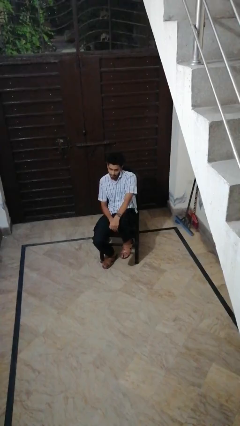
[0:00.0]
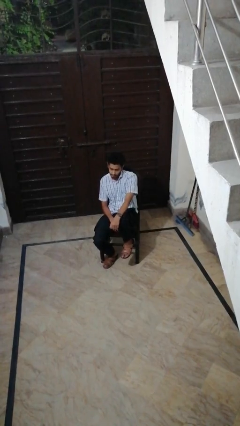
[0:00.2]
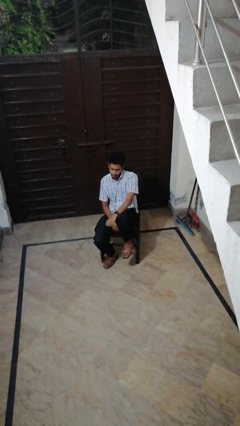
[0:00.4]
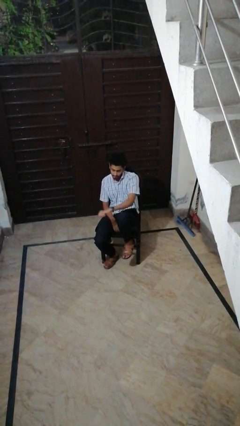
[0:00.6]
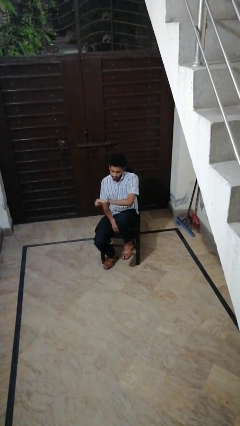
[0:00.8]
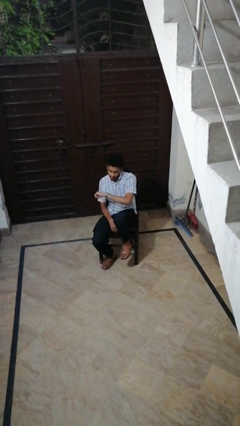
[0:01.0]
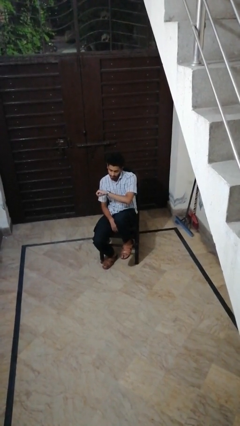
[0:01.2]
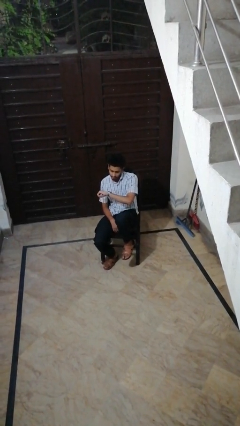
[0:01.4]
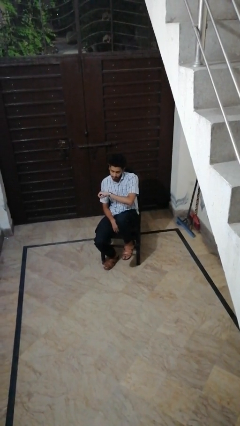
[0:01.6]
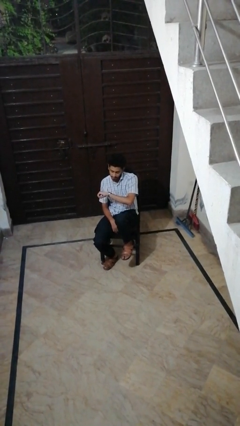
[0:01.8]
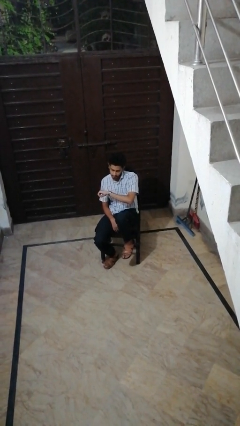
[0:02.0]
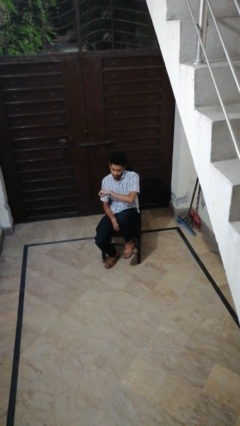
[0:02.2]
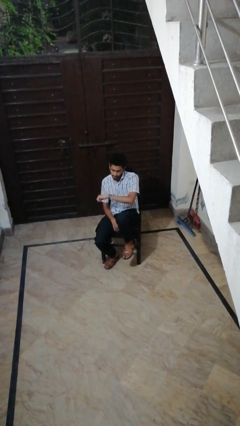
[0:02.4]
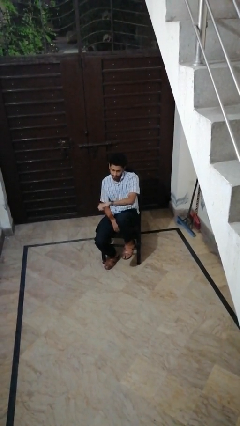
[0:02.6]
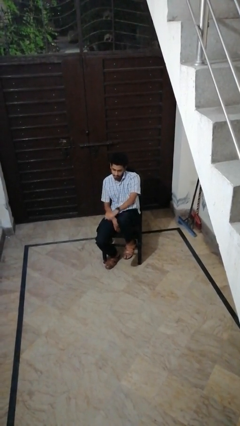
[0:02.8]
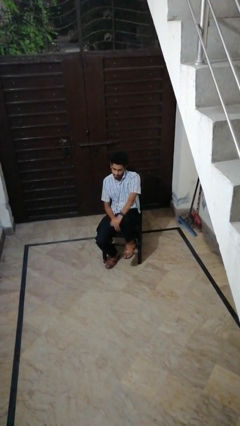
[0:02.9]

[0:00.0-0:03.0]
person looks at wristwatch

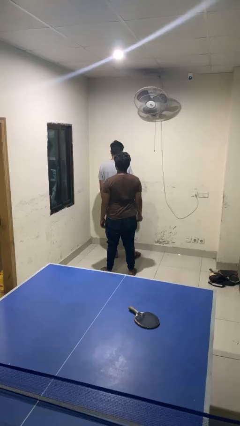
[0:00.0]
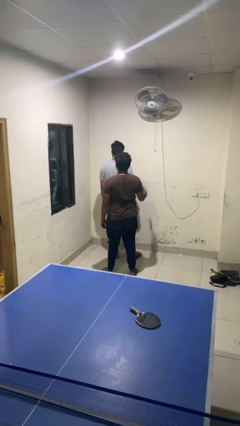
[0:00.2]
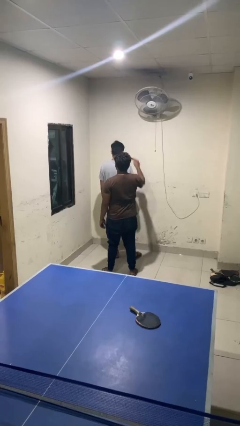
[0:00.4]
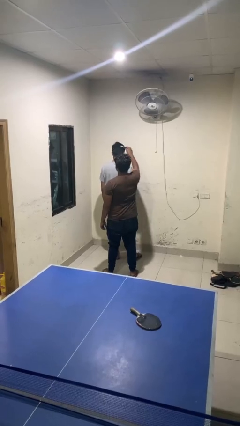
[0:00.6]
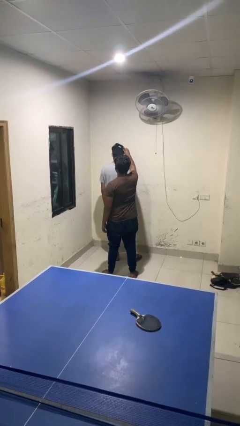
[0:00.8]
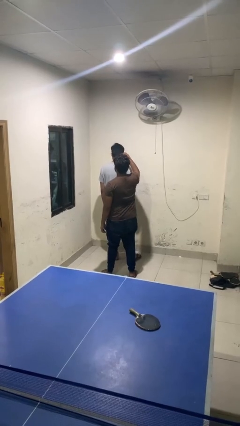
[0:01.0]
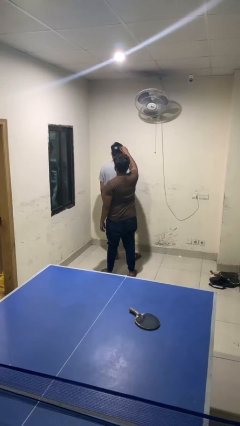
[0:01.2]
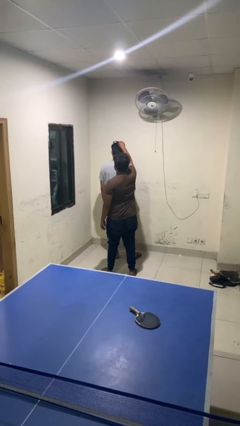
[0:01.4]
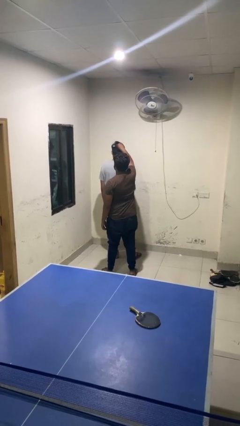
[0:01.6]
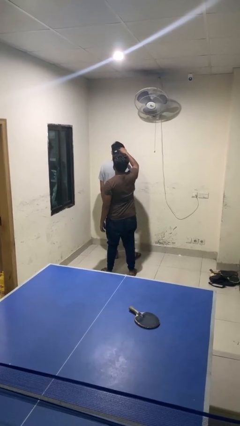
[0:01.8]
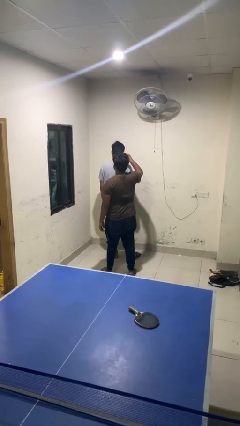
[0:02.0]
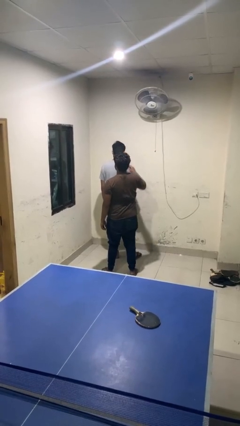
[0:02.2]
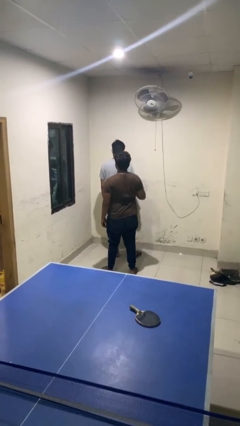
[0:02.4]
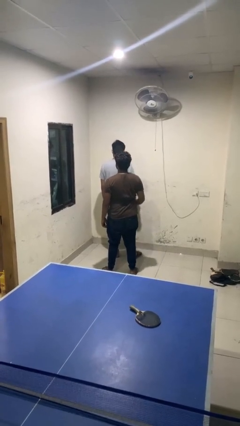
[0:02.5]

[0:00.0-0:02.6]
person brushes hair of person

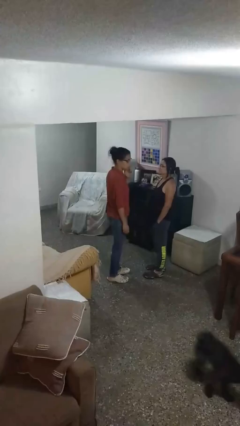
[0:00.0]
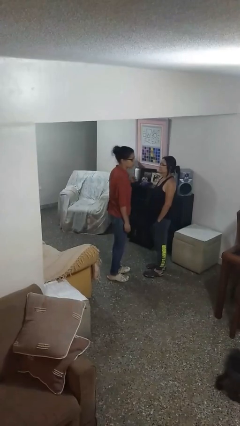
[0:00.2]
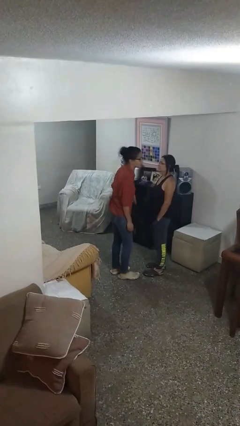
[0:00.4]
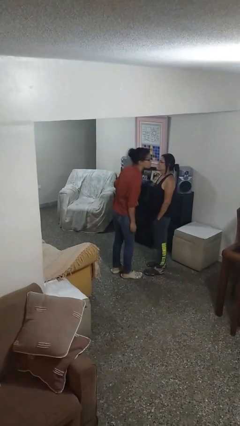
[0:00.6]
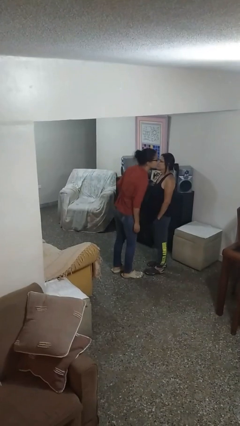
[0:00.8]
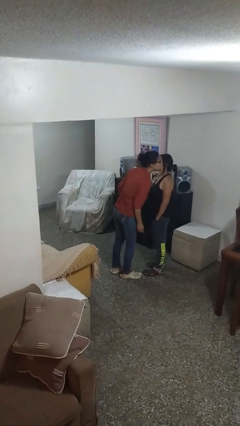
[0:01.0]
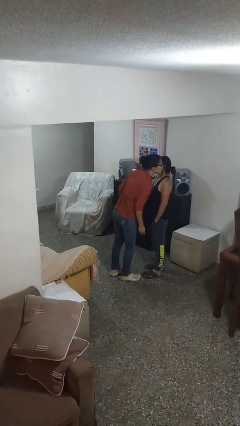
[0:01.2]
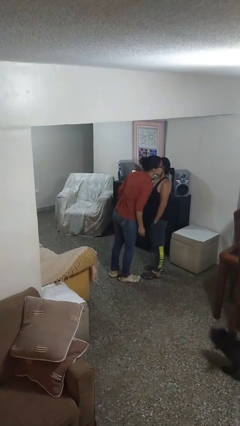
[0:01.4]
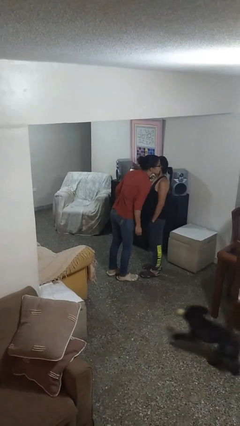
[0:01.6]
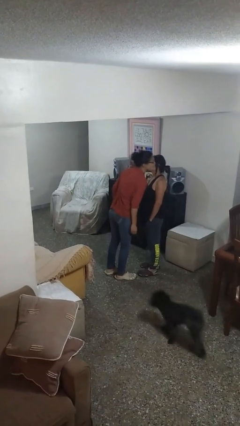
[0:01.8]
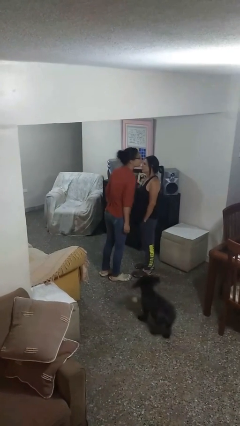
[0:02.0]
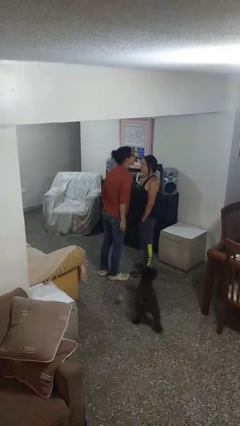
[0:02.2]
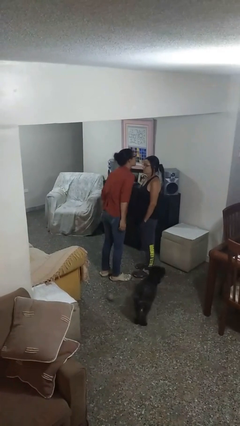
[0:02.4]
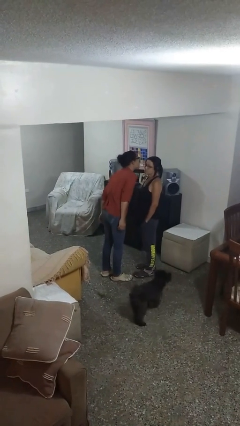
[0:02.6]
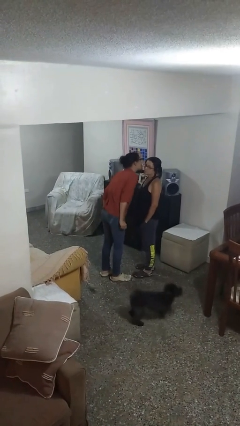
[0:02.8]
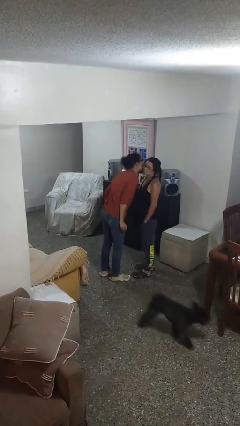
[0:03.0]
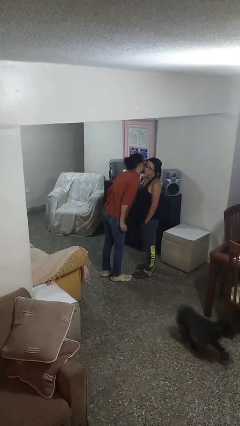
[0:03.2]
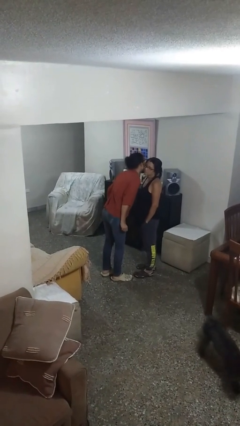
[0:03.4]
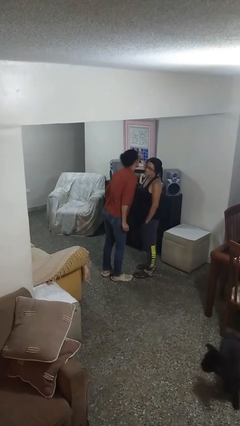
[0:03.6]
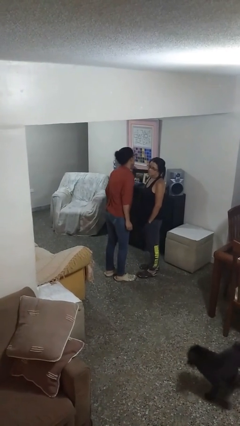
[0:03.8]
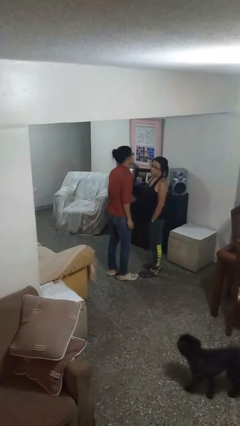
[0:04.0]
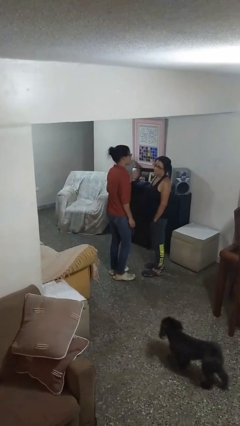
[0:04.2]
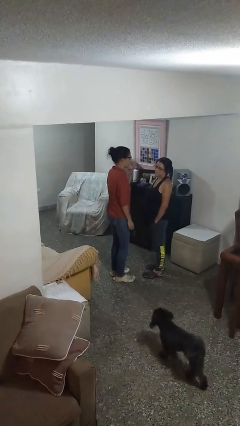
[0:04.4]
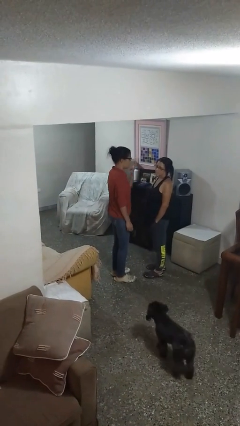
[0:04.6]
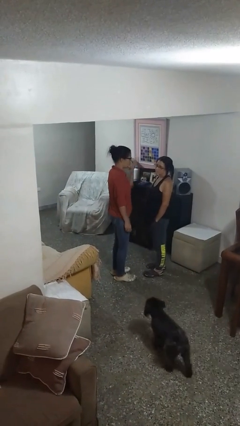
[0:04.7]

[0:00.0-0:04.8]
person kisses cheek of person

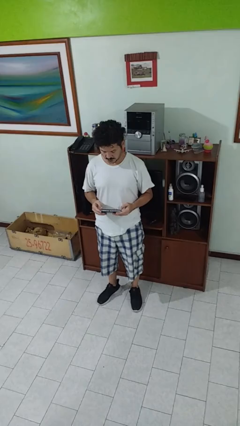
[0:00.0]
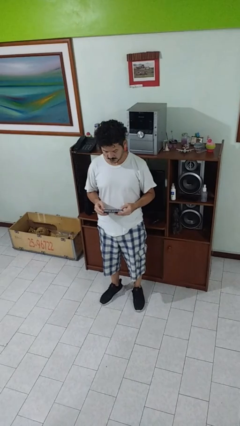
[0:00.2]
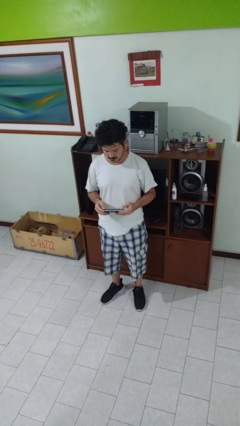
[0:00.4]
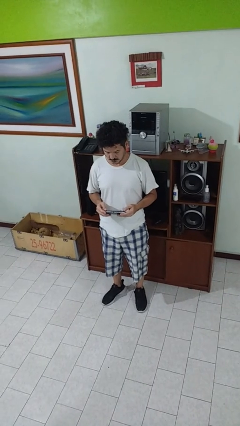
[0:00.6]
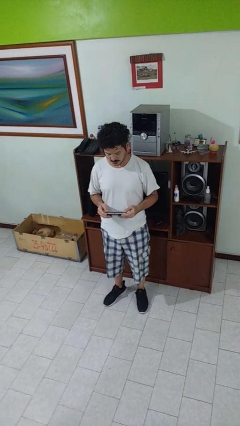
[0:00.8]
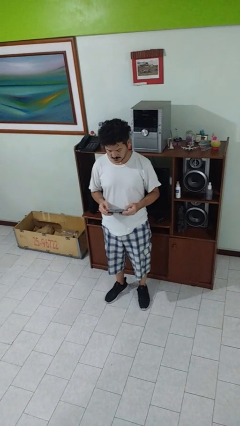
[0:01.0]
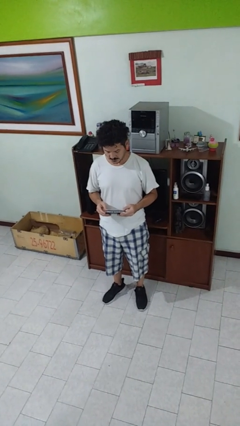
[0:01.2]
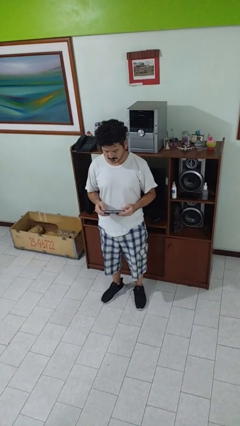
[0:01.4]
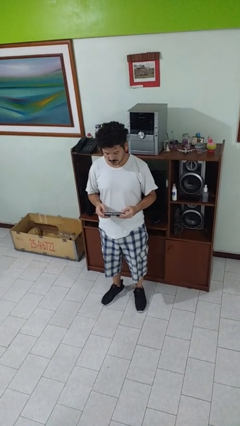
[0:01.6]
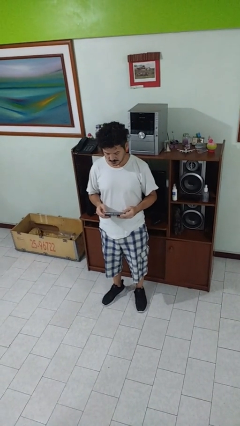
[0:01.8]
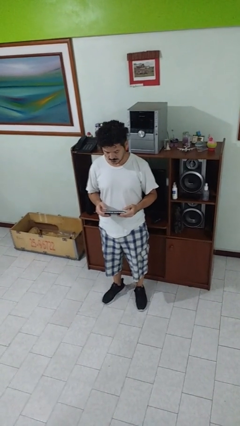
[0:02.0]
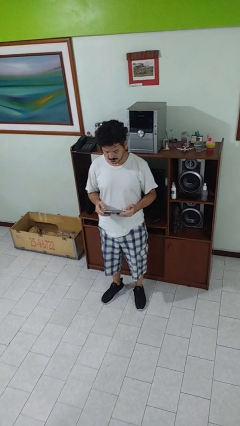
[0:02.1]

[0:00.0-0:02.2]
person interacts with handheld game

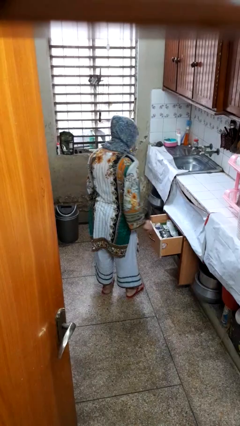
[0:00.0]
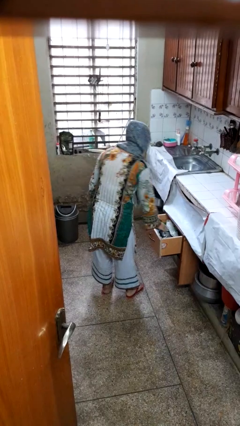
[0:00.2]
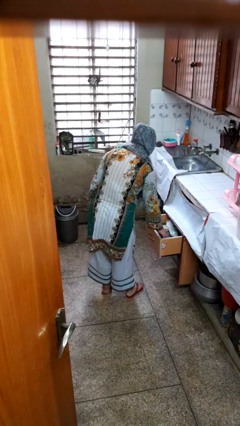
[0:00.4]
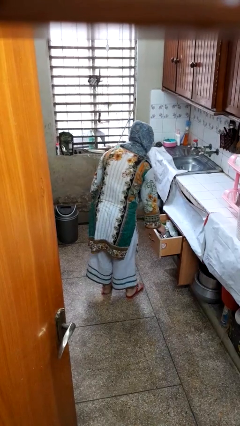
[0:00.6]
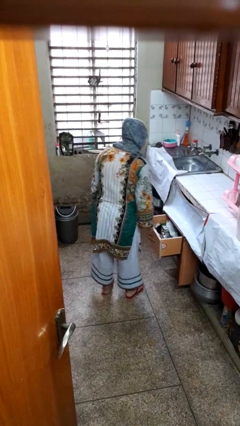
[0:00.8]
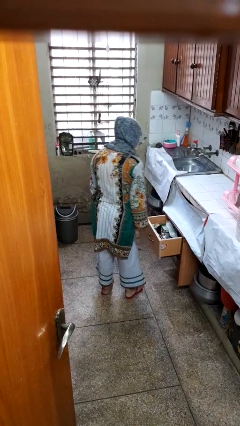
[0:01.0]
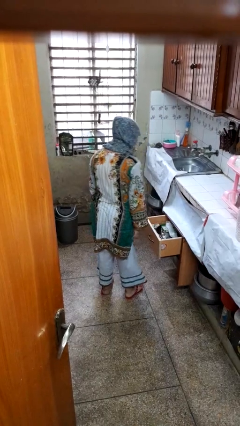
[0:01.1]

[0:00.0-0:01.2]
person puts object into kitchen drawer

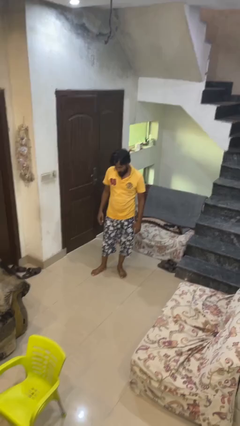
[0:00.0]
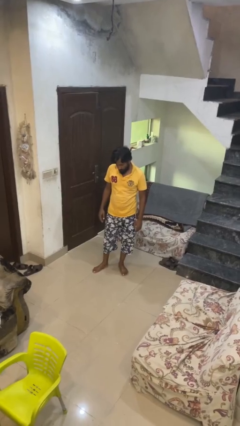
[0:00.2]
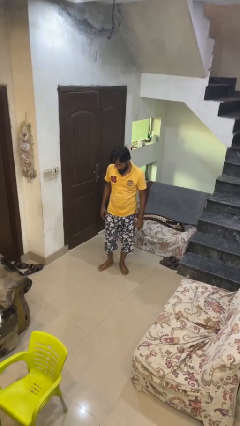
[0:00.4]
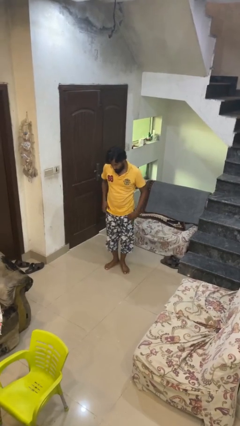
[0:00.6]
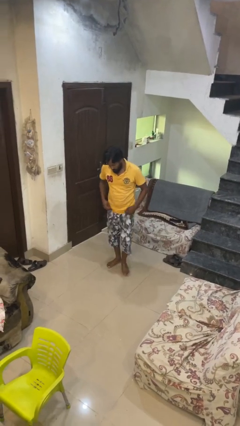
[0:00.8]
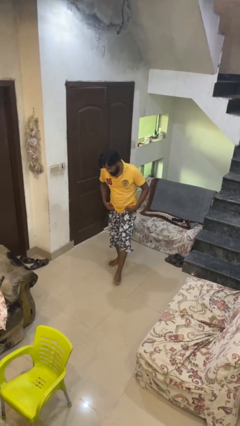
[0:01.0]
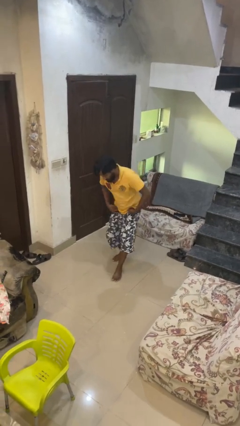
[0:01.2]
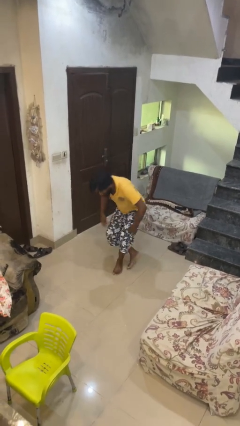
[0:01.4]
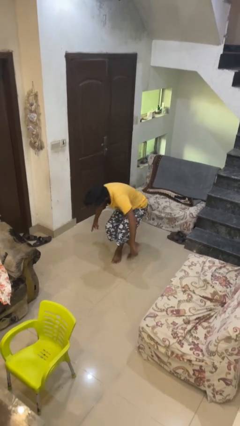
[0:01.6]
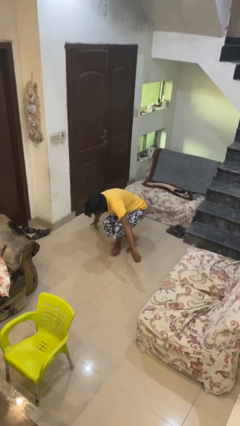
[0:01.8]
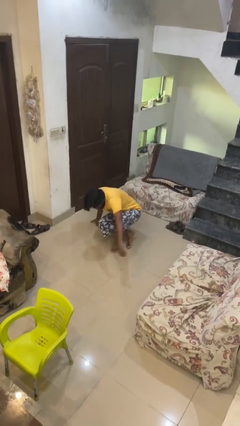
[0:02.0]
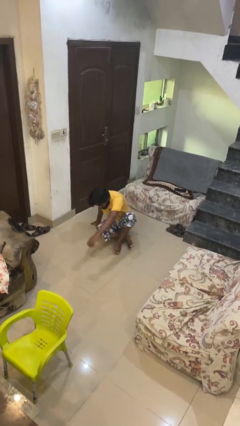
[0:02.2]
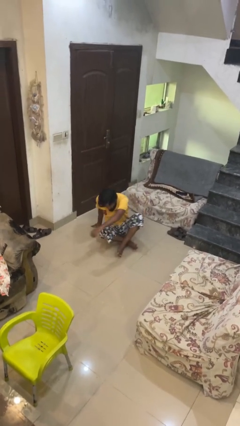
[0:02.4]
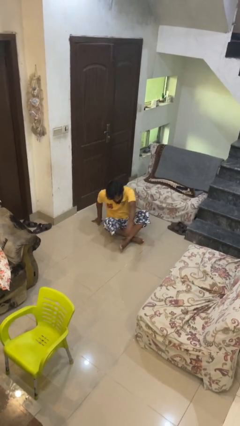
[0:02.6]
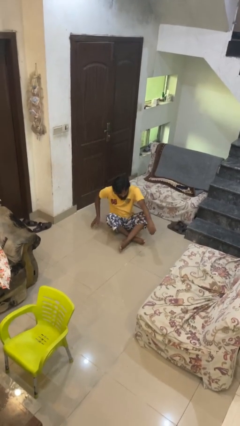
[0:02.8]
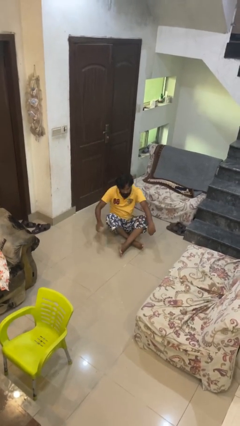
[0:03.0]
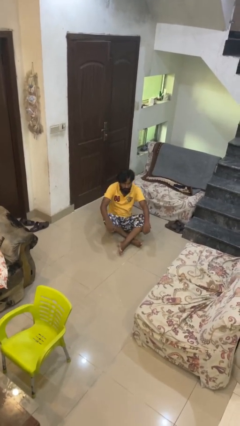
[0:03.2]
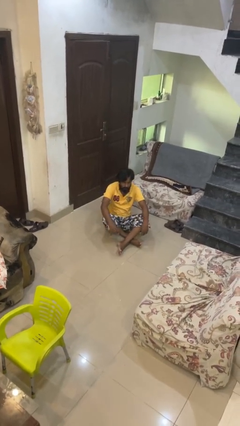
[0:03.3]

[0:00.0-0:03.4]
person sits crisscross
